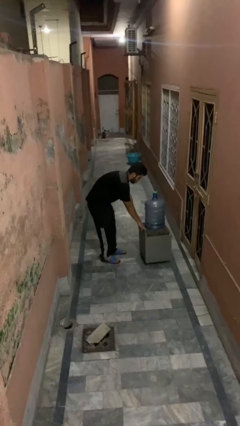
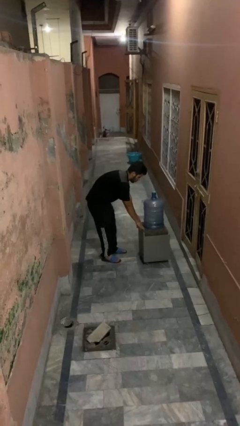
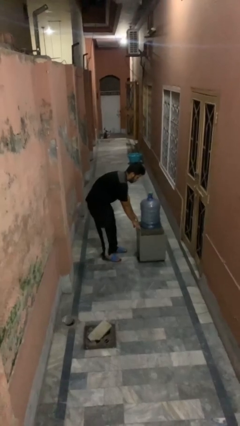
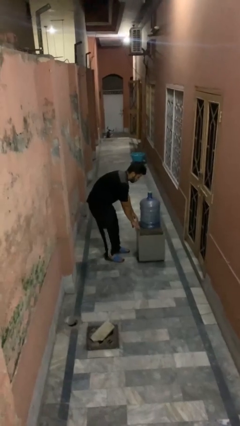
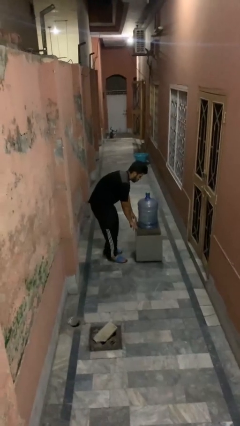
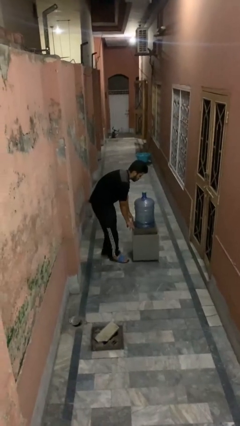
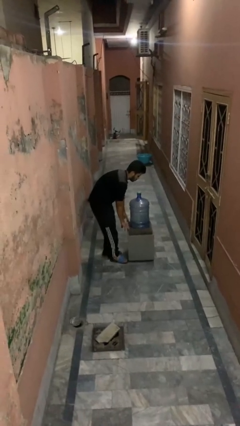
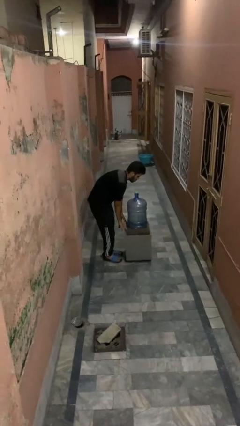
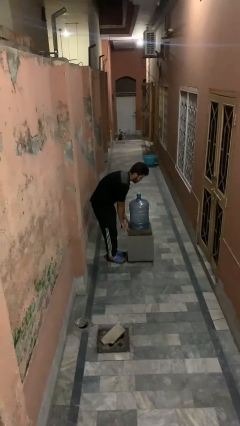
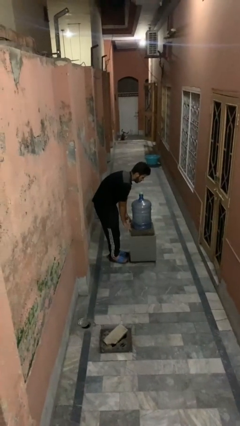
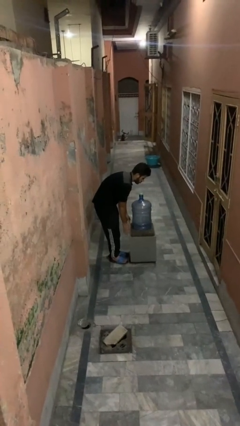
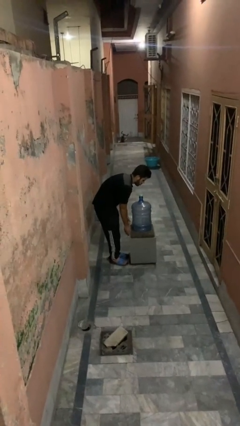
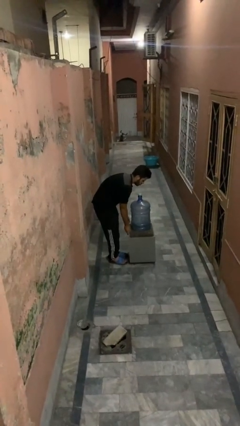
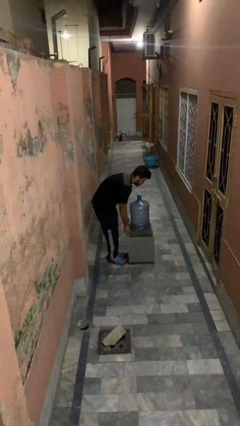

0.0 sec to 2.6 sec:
person pulls wheeled cart

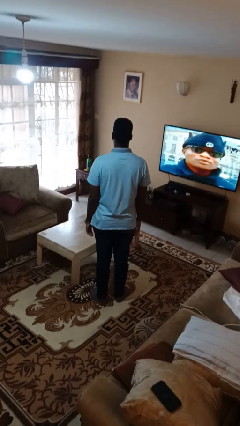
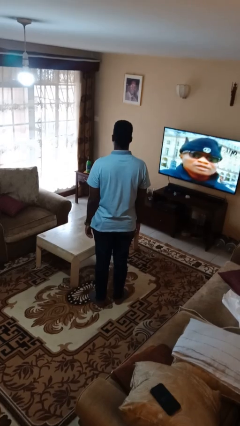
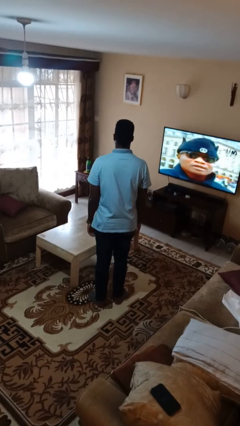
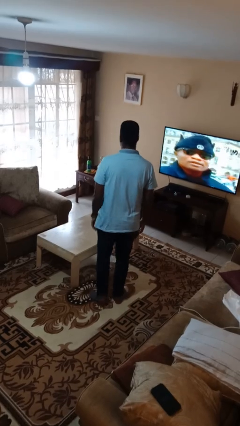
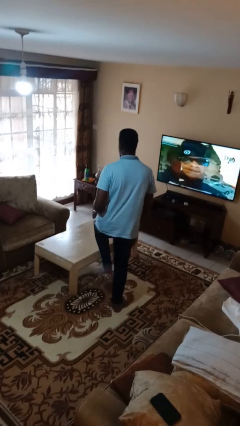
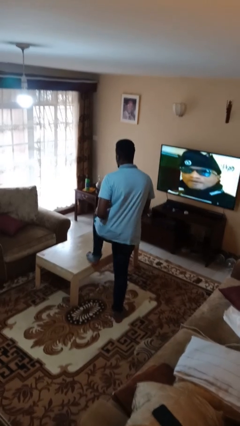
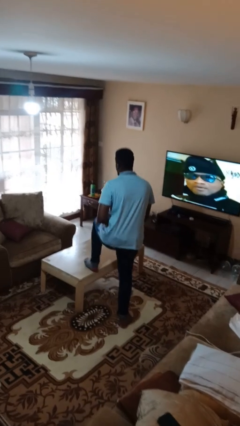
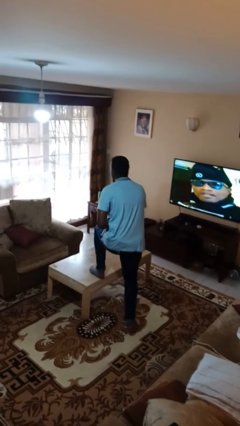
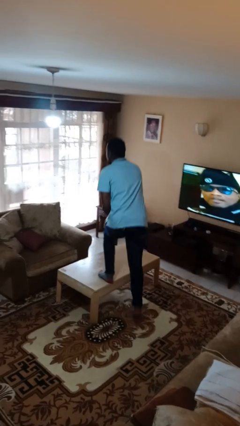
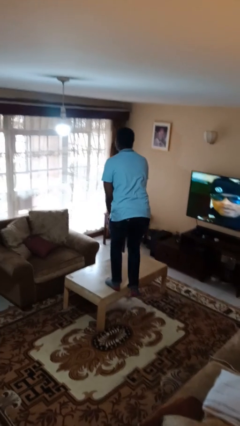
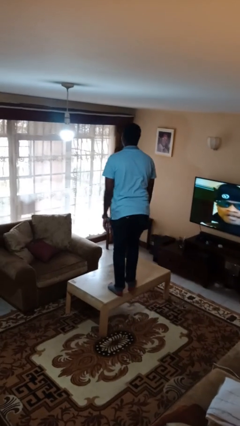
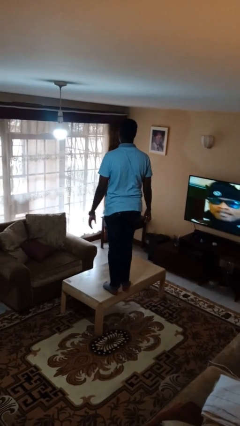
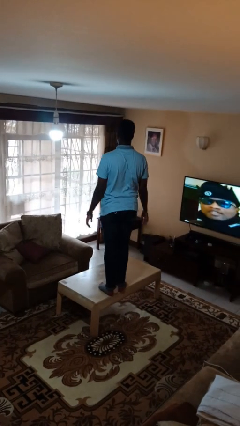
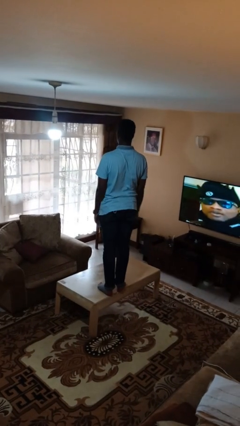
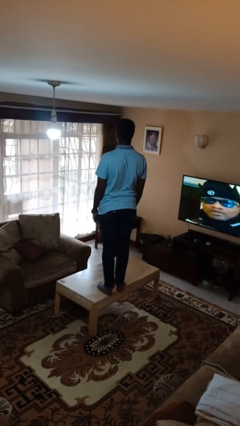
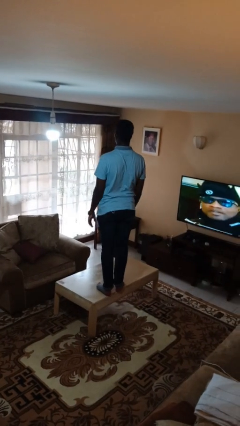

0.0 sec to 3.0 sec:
person climbs on table

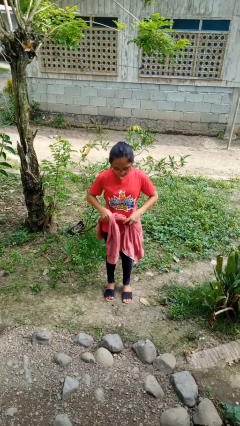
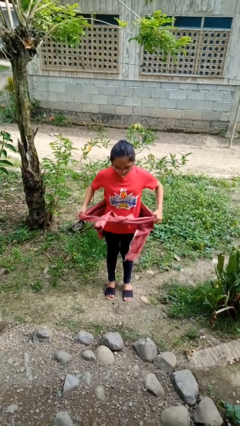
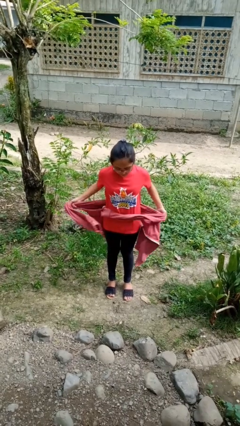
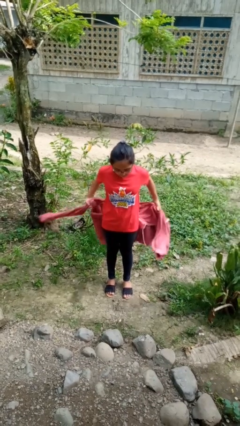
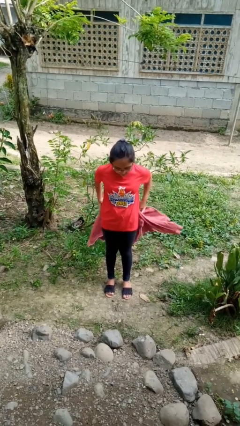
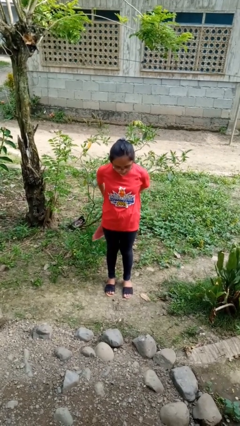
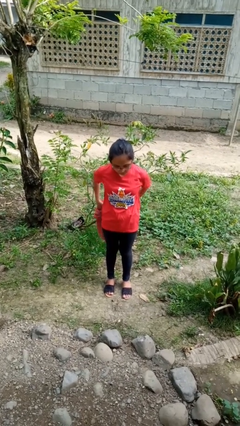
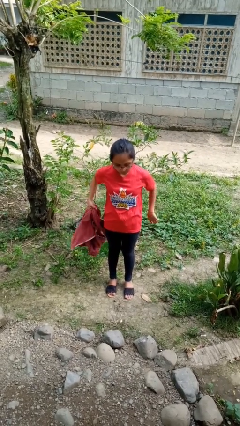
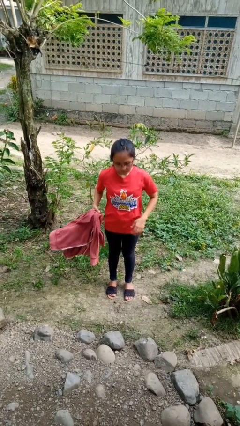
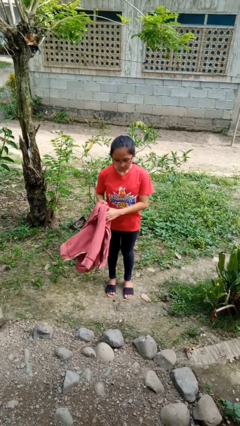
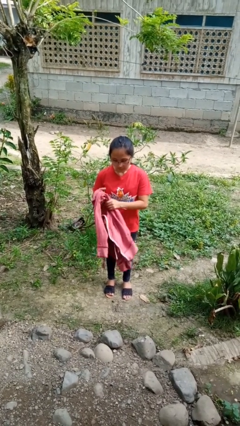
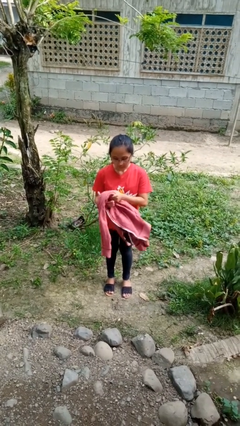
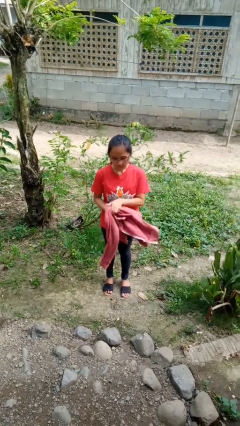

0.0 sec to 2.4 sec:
person unties jacket around waist

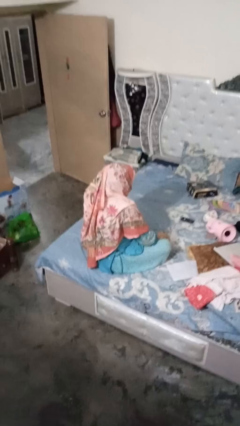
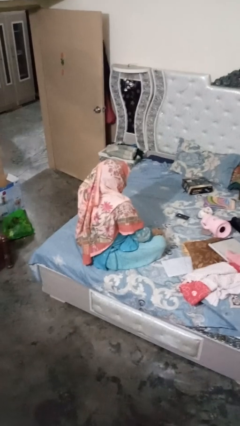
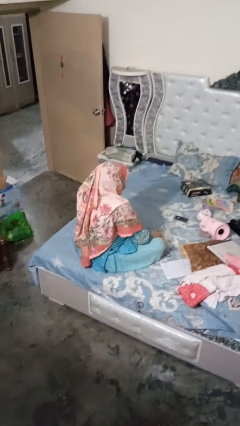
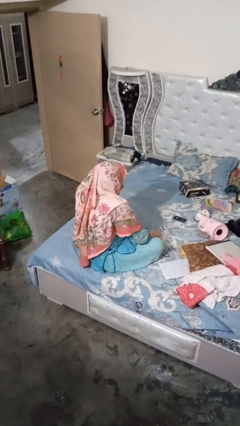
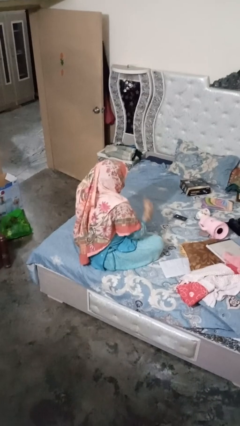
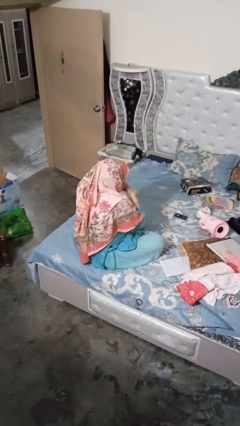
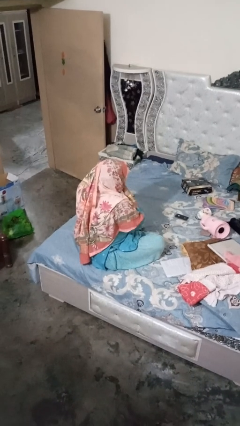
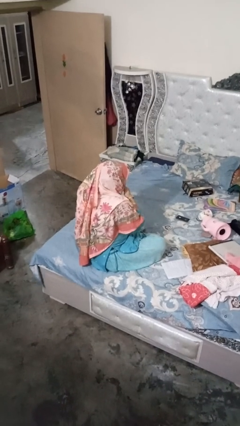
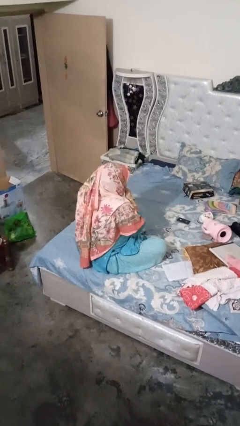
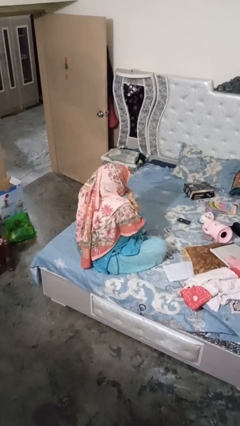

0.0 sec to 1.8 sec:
person strokes chin

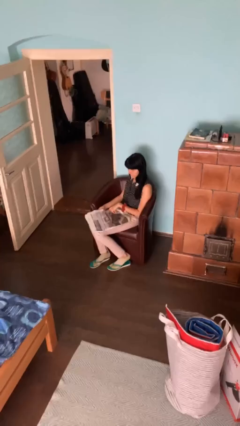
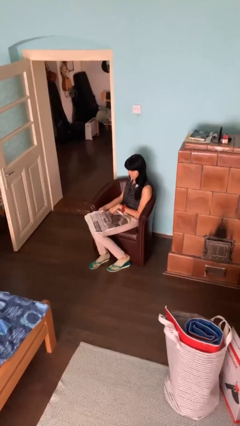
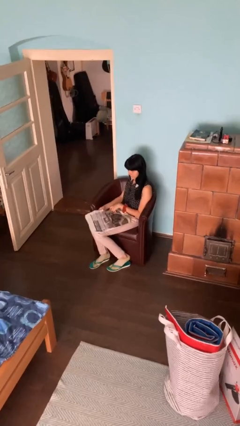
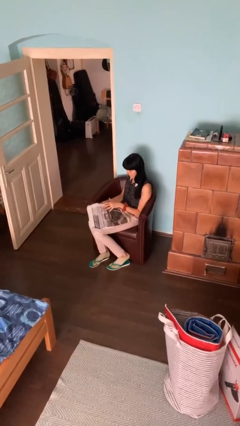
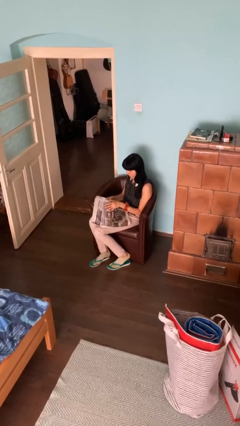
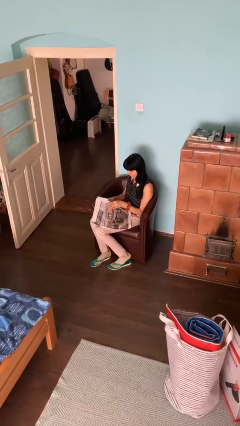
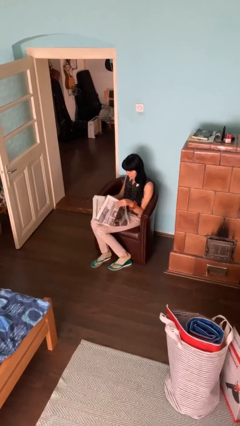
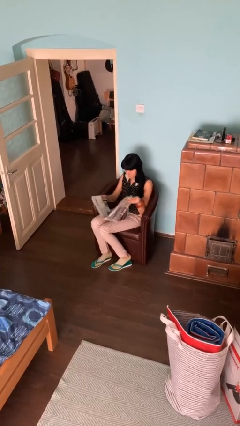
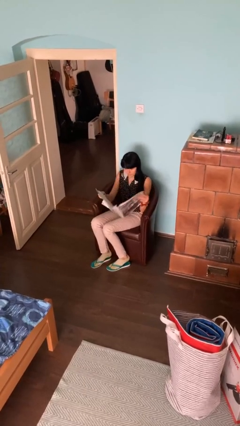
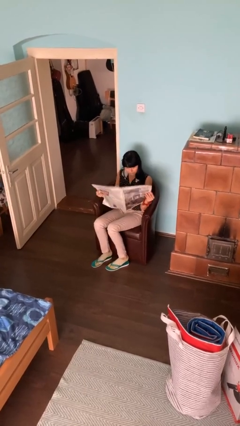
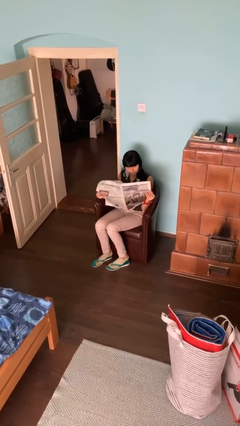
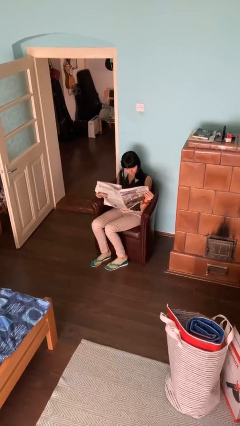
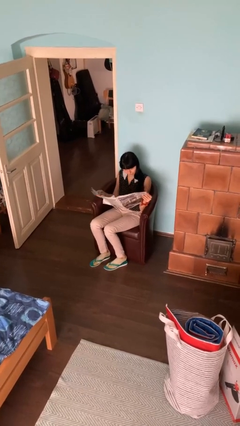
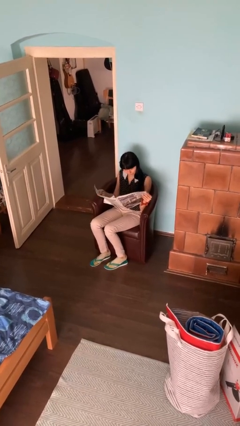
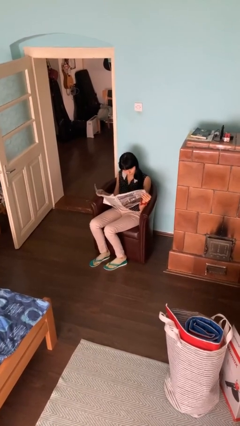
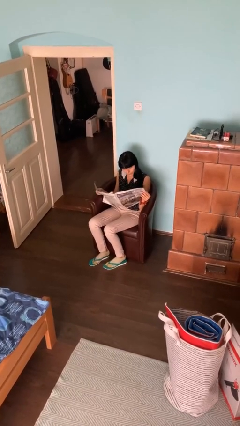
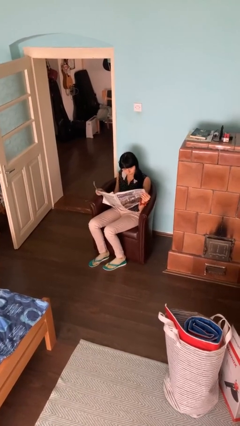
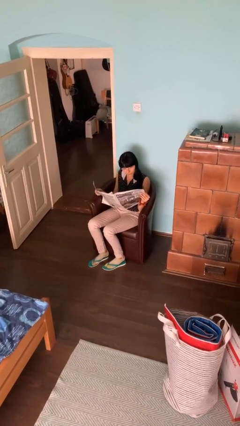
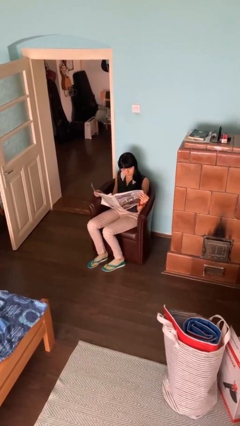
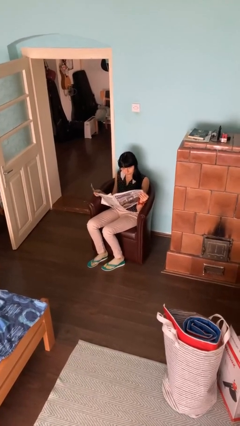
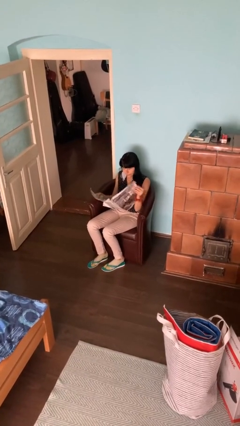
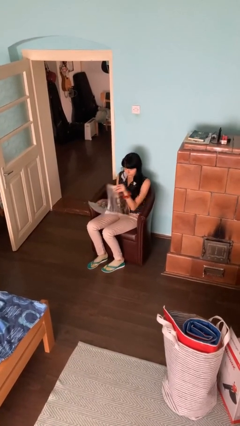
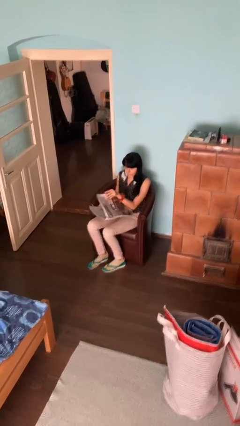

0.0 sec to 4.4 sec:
person reads newspaper

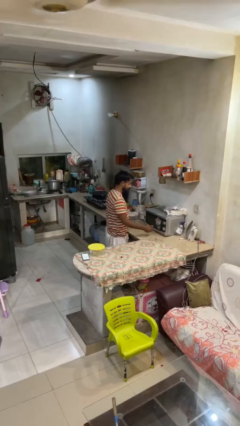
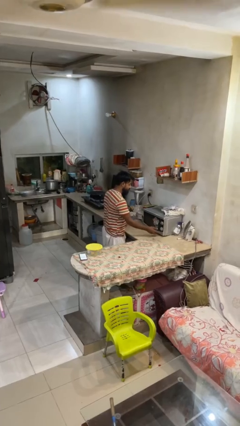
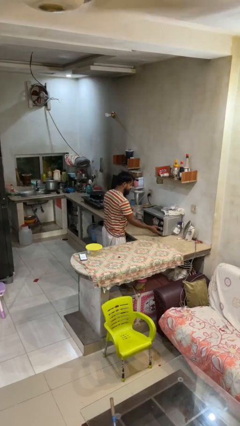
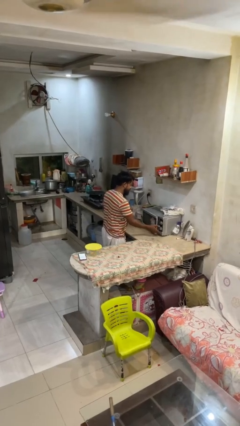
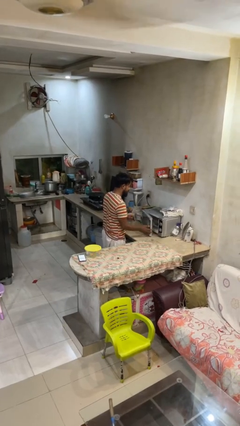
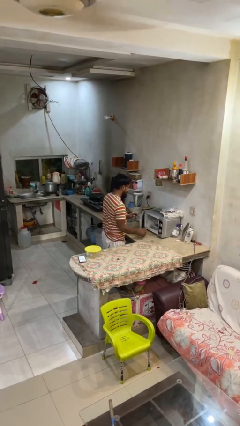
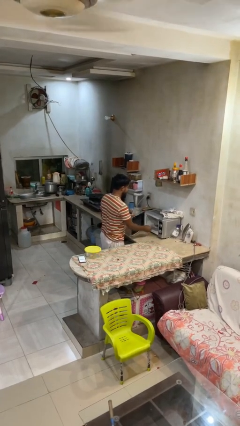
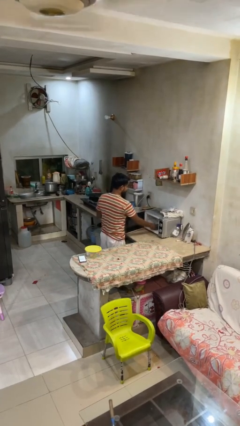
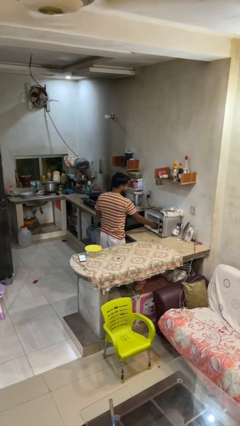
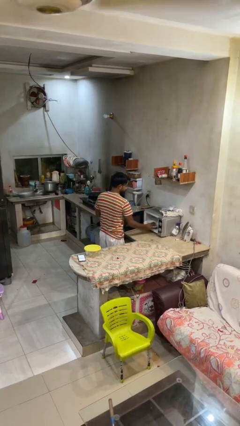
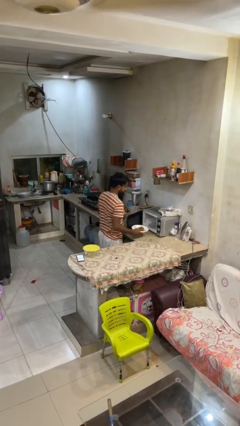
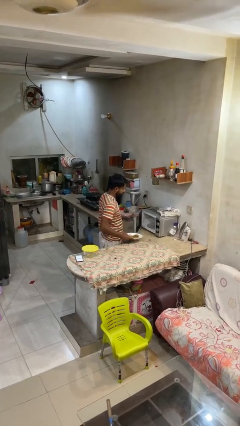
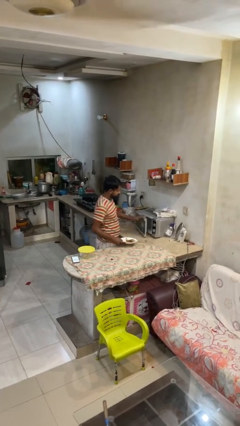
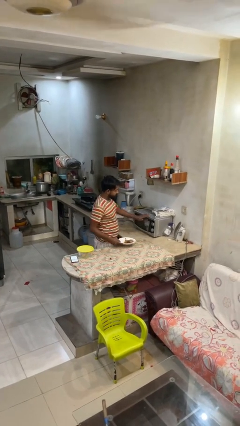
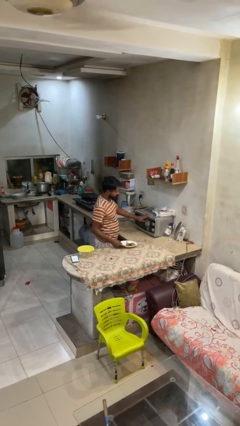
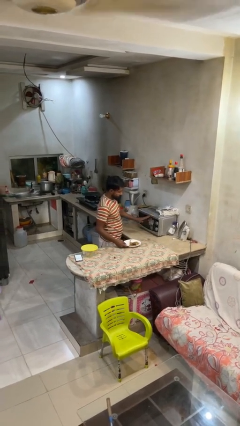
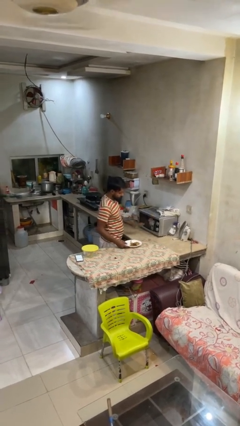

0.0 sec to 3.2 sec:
person takes object from microwave

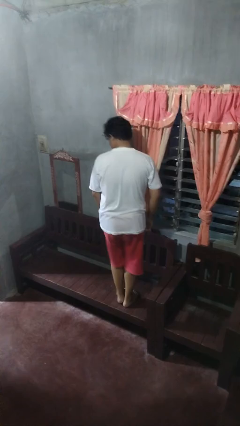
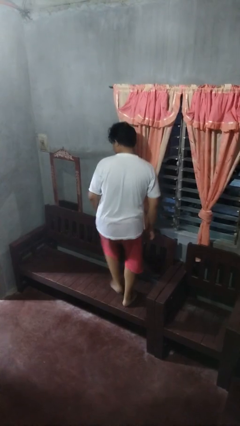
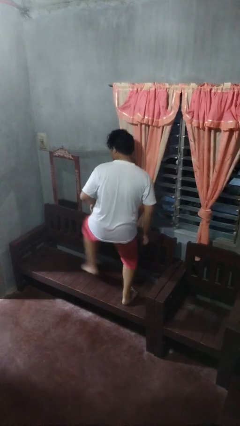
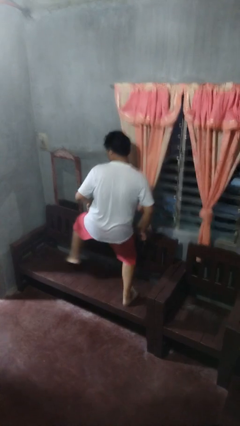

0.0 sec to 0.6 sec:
person jumps on couch
